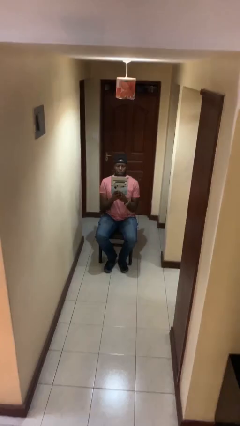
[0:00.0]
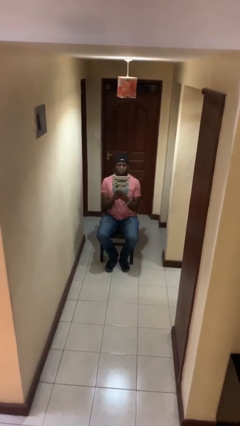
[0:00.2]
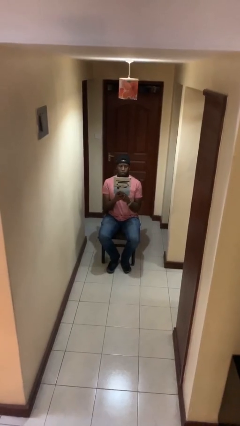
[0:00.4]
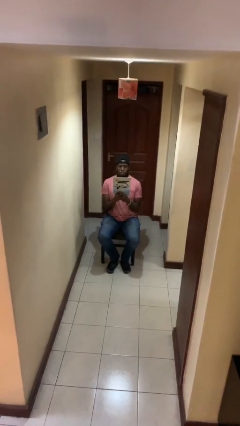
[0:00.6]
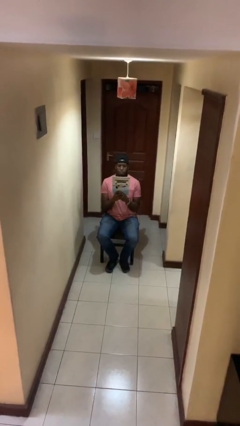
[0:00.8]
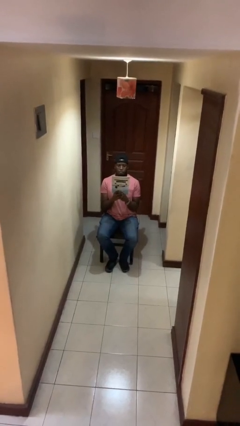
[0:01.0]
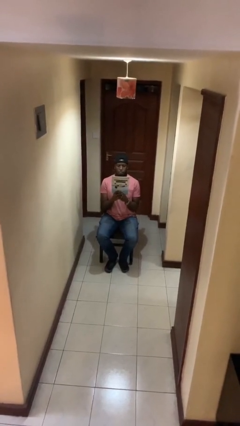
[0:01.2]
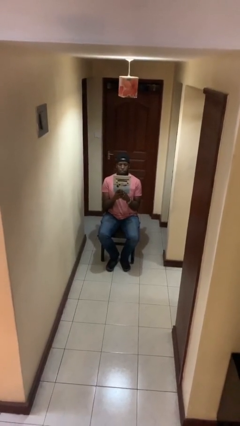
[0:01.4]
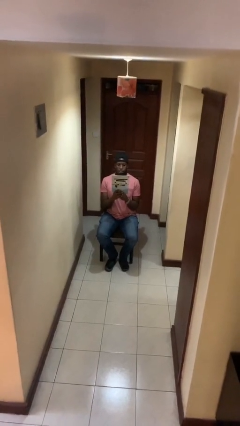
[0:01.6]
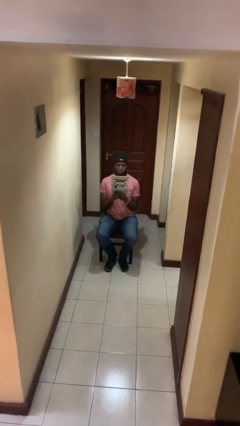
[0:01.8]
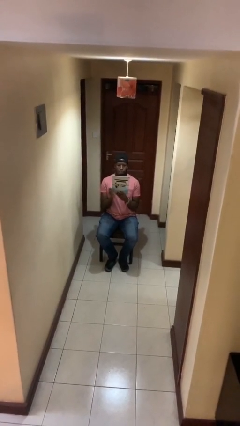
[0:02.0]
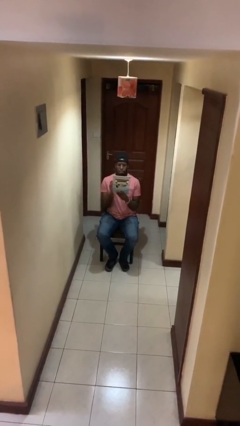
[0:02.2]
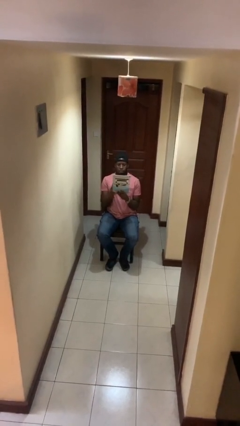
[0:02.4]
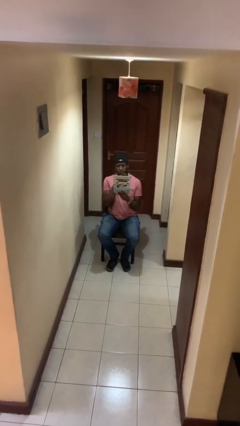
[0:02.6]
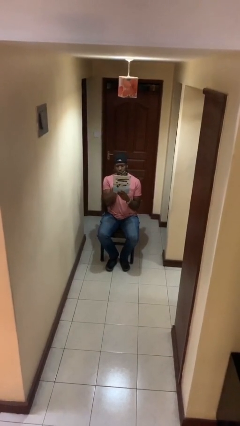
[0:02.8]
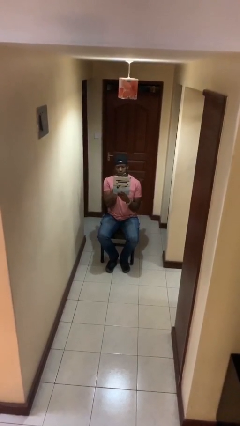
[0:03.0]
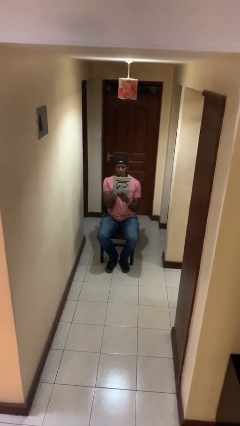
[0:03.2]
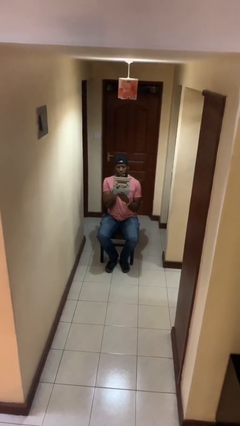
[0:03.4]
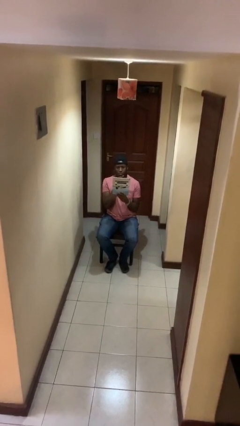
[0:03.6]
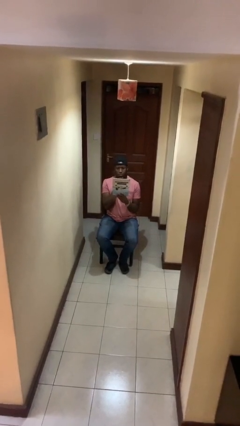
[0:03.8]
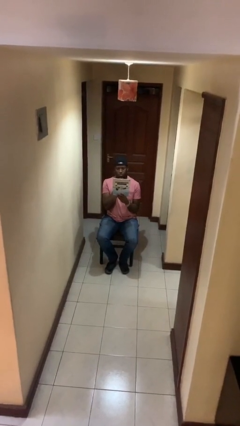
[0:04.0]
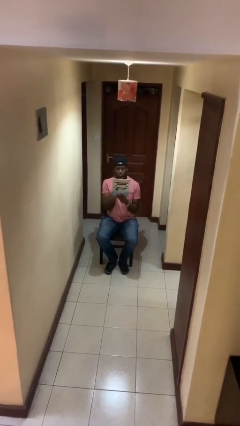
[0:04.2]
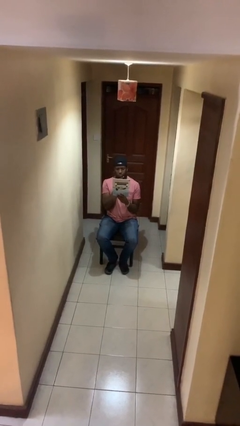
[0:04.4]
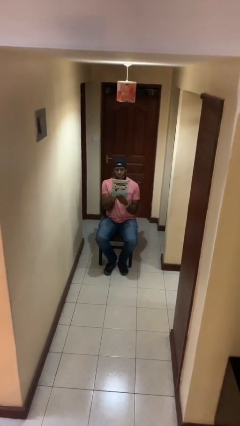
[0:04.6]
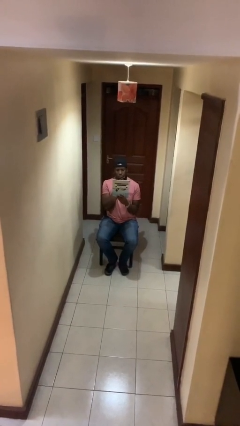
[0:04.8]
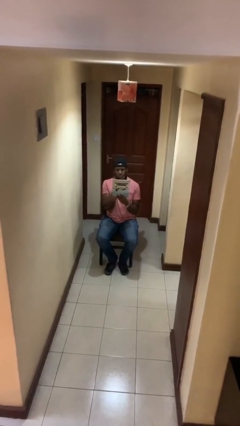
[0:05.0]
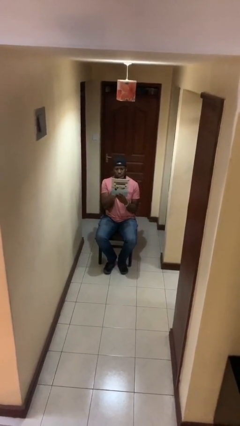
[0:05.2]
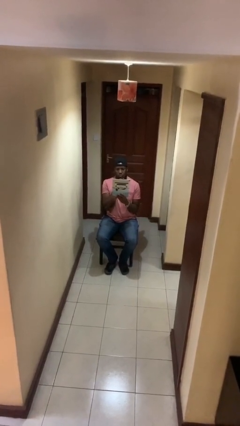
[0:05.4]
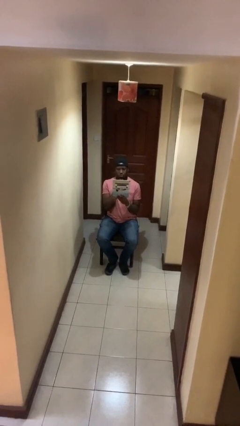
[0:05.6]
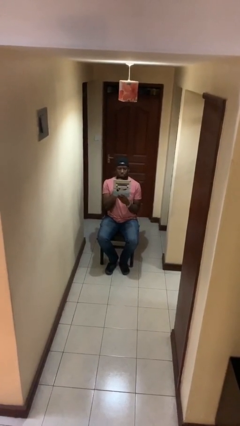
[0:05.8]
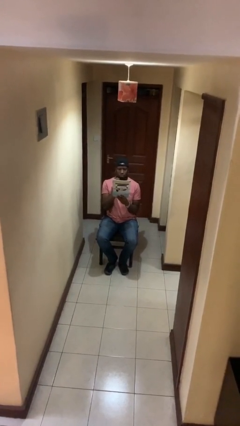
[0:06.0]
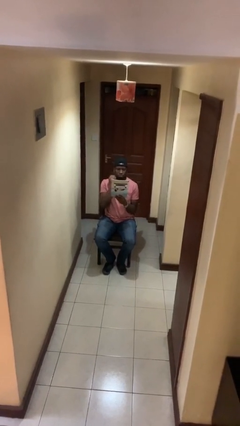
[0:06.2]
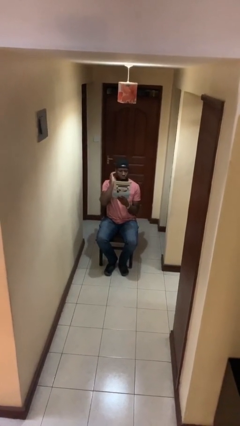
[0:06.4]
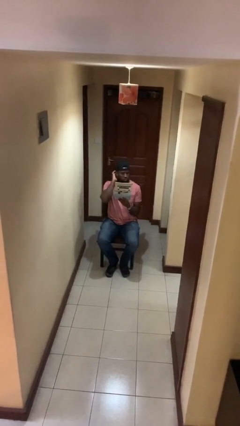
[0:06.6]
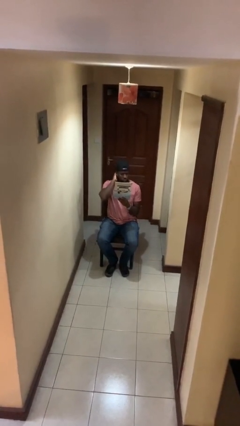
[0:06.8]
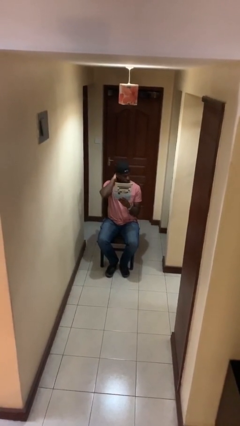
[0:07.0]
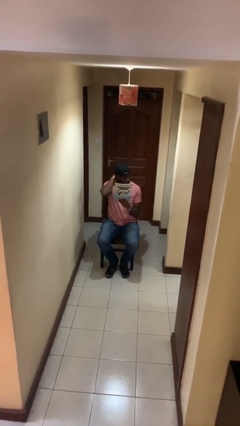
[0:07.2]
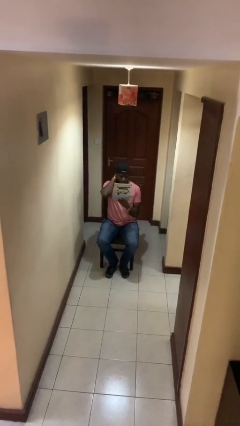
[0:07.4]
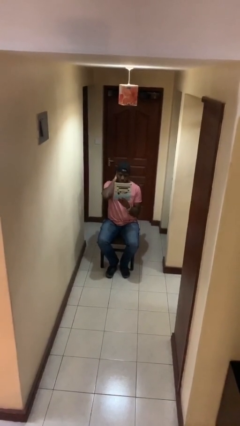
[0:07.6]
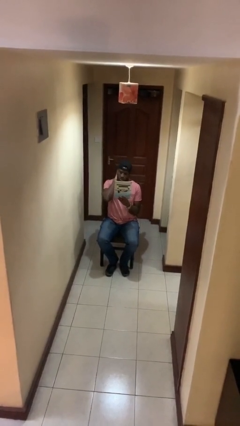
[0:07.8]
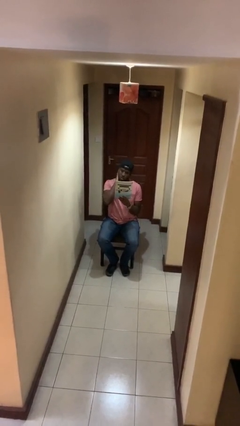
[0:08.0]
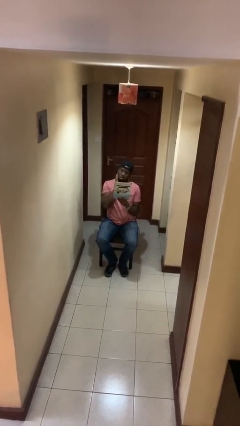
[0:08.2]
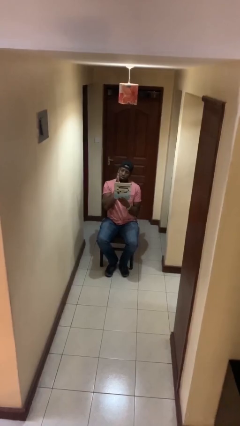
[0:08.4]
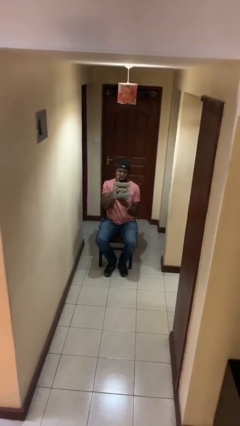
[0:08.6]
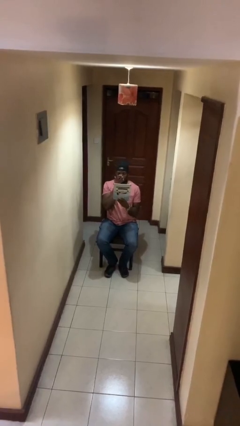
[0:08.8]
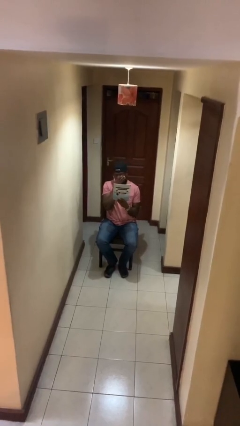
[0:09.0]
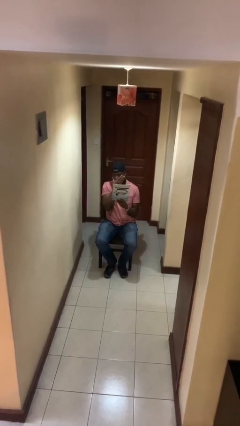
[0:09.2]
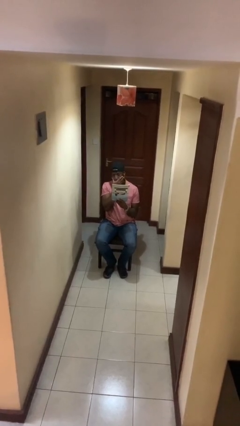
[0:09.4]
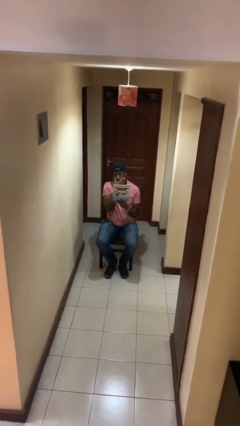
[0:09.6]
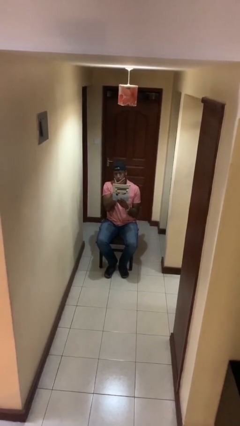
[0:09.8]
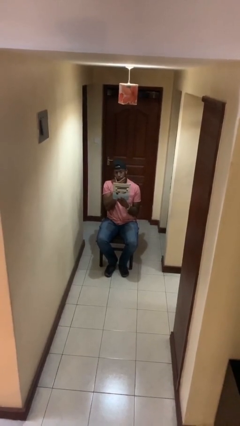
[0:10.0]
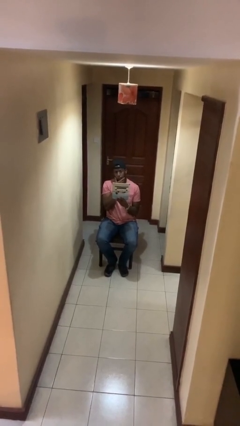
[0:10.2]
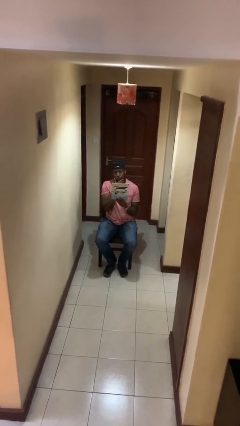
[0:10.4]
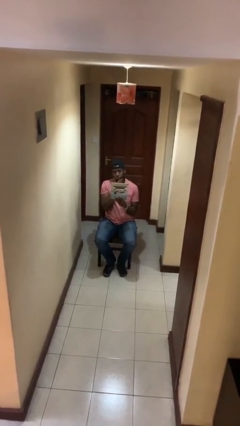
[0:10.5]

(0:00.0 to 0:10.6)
person reads document

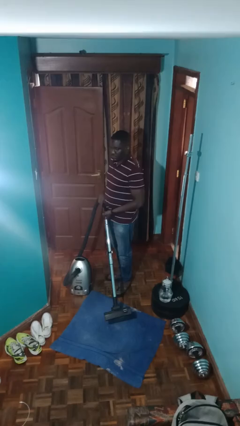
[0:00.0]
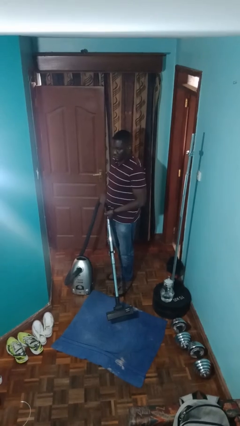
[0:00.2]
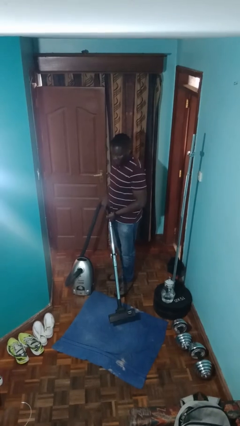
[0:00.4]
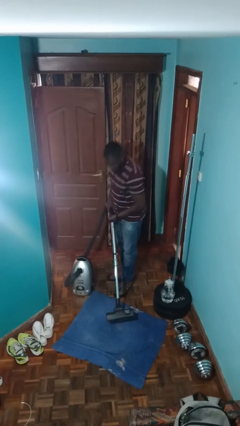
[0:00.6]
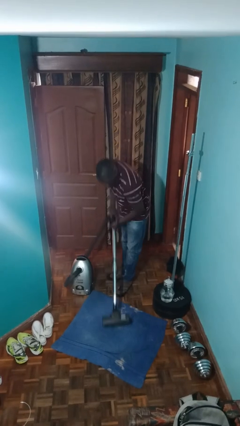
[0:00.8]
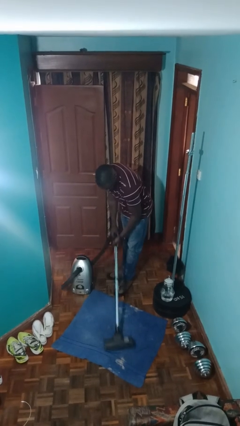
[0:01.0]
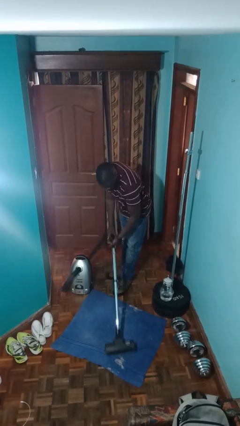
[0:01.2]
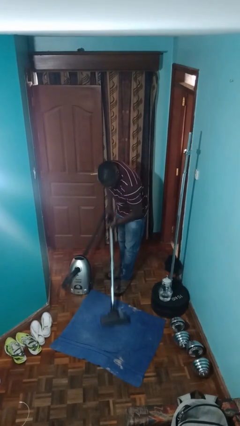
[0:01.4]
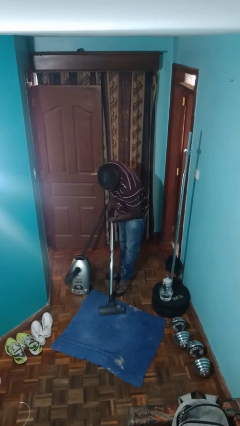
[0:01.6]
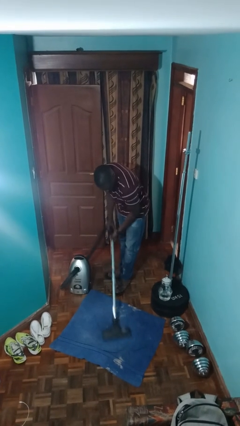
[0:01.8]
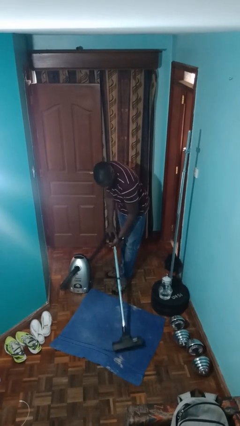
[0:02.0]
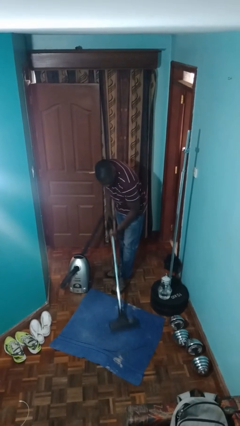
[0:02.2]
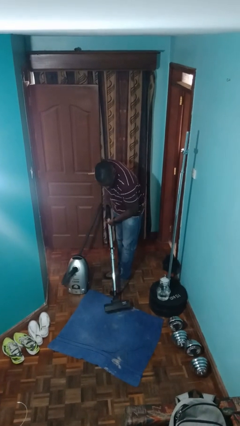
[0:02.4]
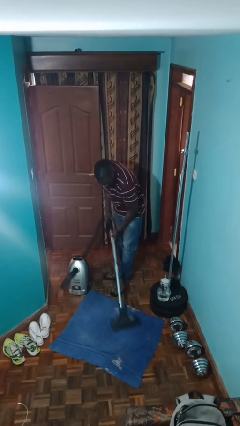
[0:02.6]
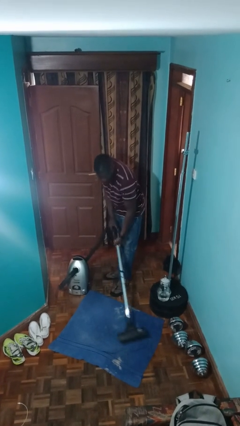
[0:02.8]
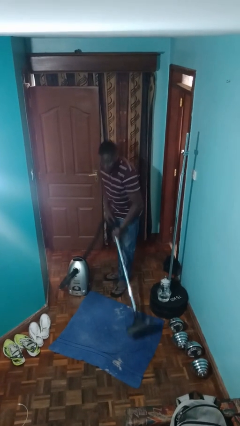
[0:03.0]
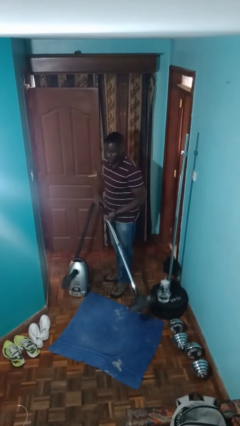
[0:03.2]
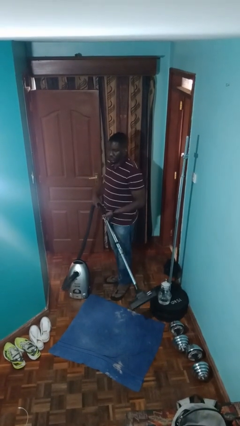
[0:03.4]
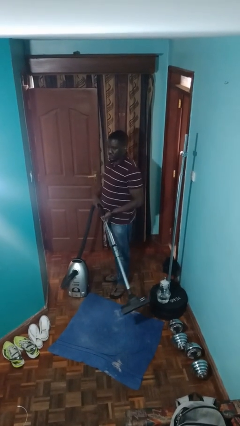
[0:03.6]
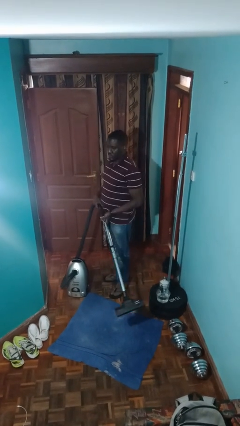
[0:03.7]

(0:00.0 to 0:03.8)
person vacuums carpet

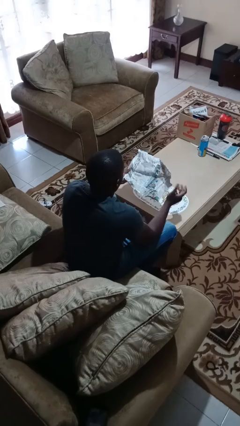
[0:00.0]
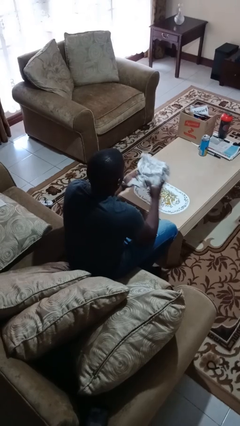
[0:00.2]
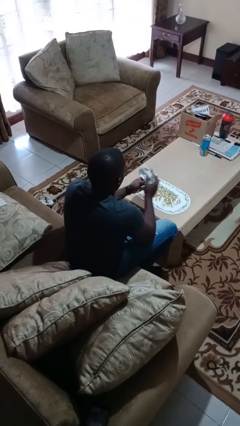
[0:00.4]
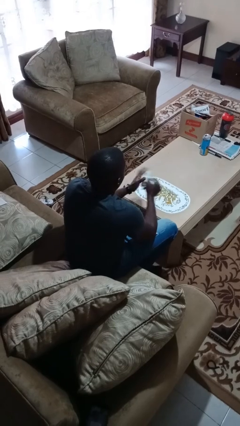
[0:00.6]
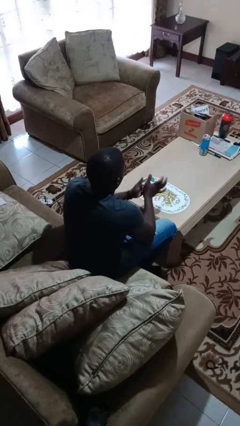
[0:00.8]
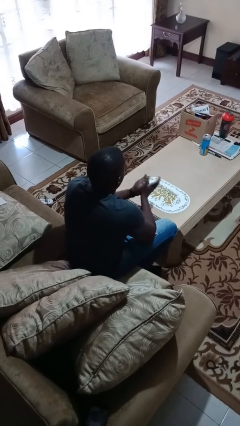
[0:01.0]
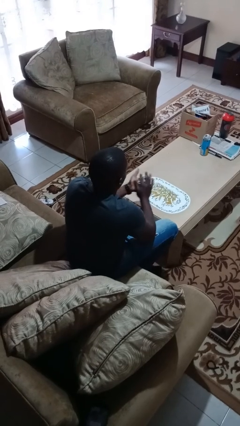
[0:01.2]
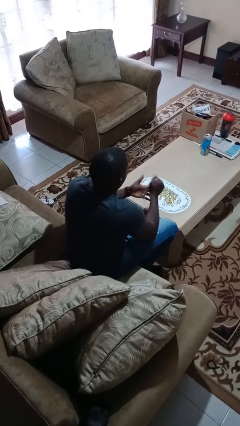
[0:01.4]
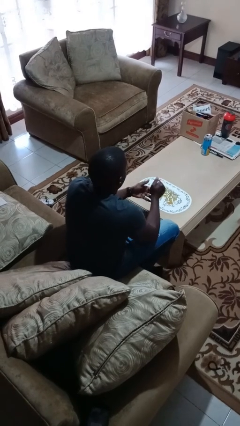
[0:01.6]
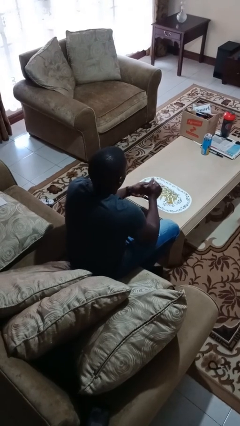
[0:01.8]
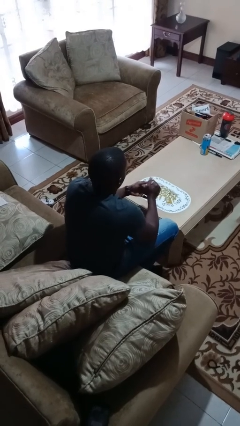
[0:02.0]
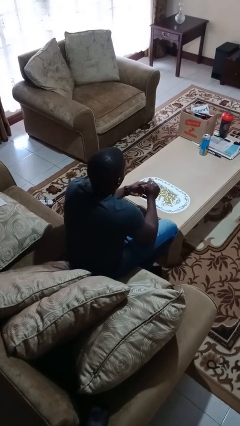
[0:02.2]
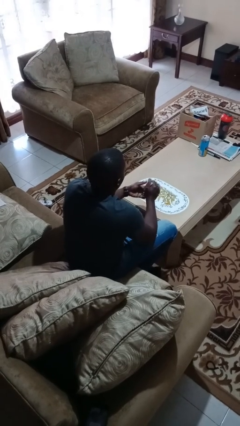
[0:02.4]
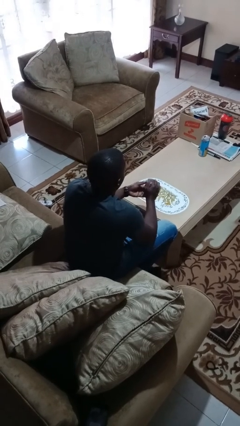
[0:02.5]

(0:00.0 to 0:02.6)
person crumples paper

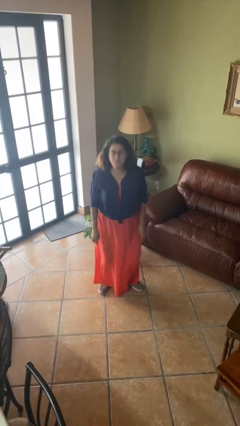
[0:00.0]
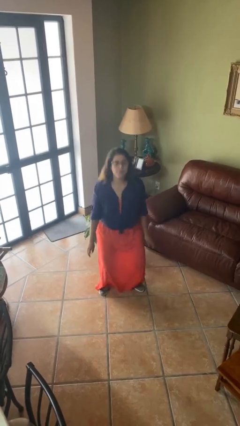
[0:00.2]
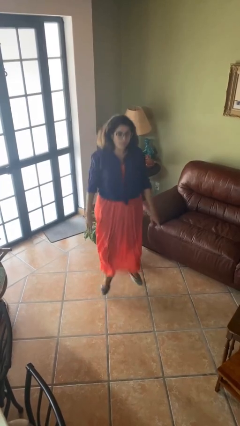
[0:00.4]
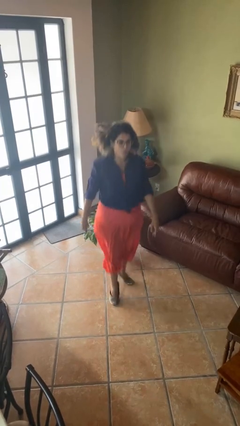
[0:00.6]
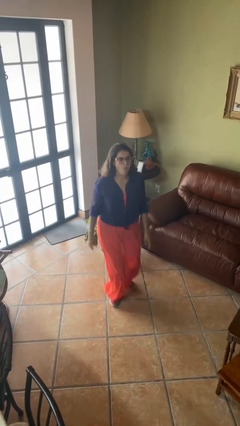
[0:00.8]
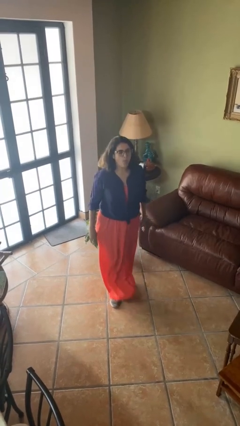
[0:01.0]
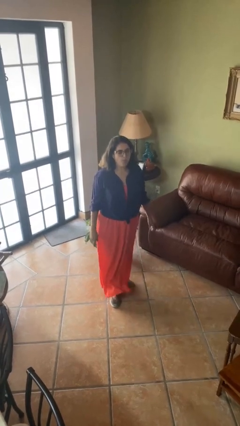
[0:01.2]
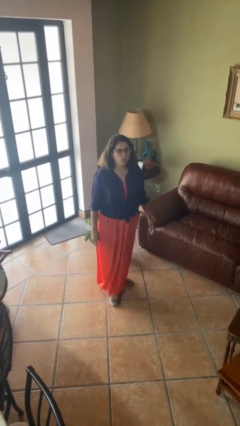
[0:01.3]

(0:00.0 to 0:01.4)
person jumps
